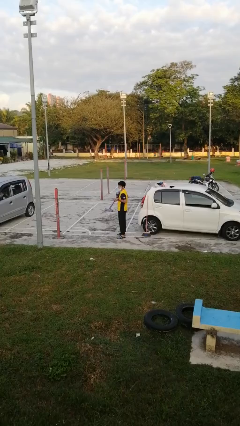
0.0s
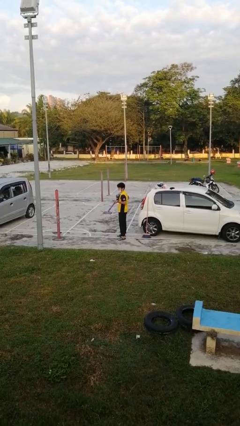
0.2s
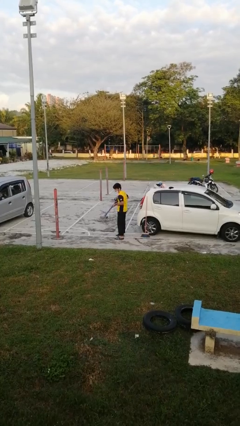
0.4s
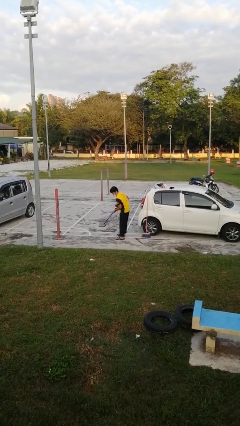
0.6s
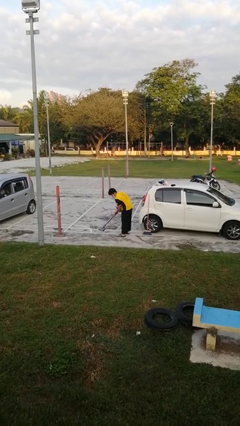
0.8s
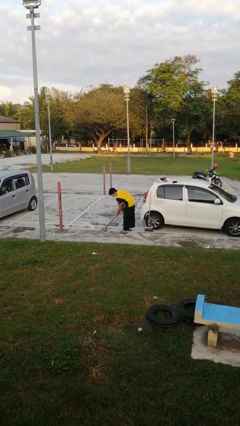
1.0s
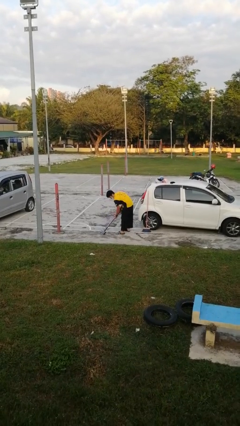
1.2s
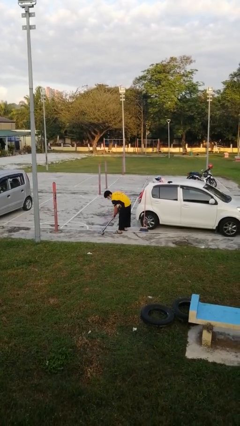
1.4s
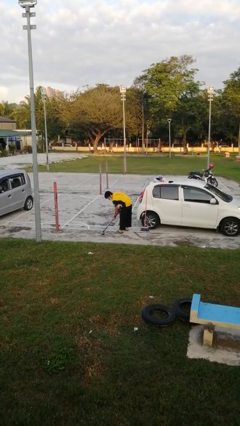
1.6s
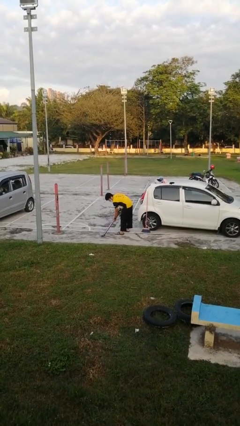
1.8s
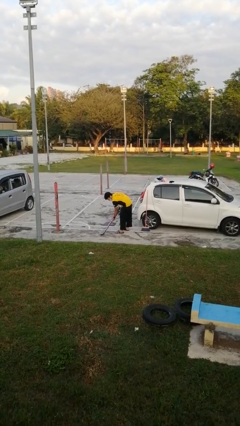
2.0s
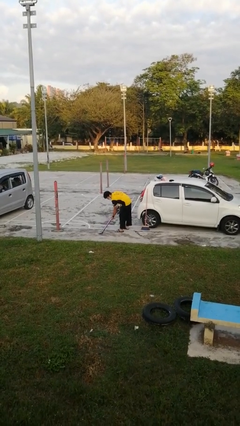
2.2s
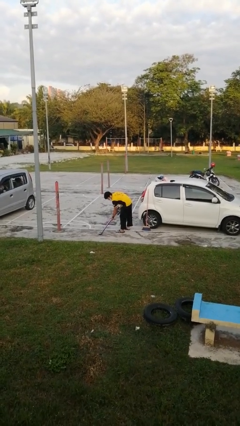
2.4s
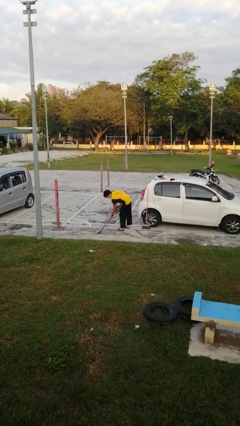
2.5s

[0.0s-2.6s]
person vacuums carpet

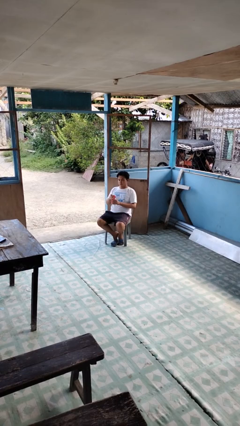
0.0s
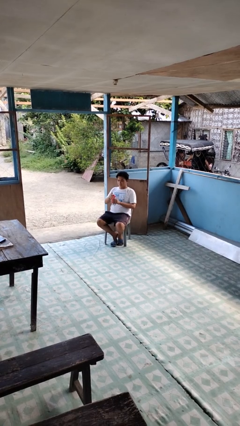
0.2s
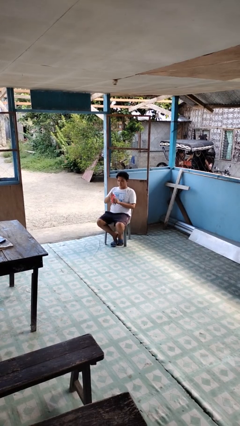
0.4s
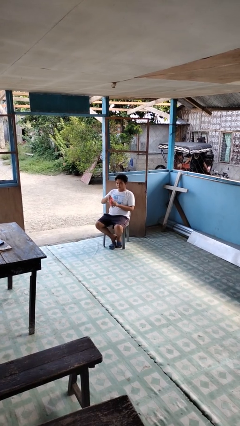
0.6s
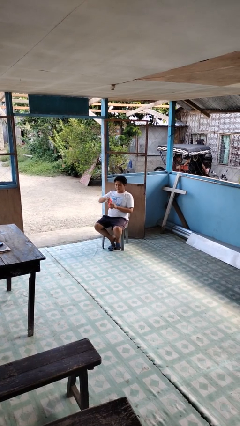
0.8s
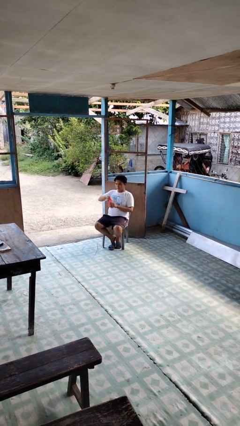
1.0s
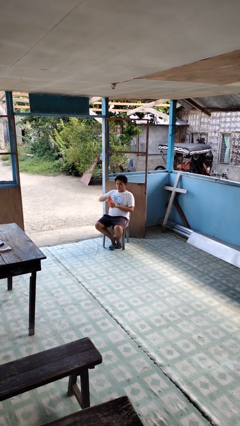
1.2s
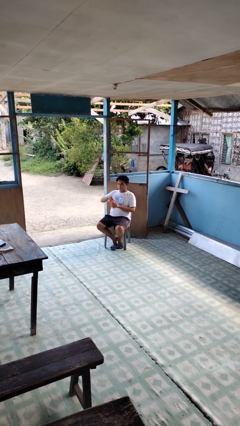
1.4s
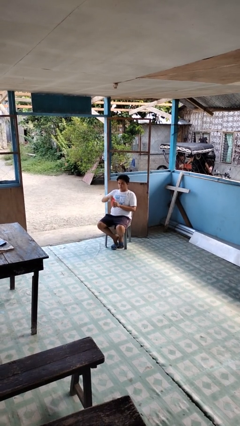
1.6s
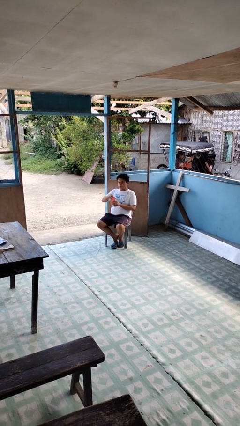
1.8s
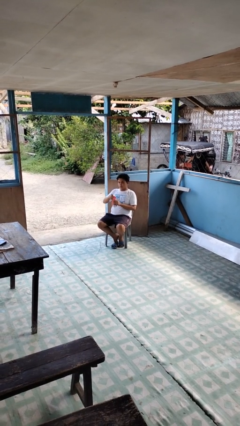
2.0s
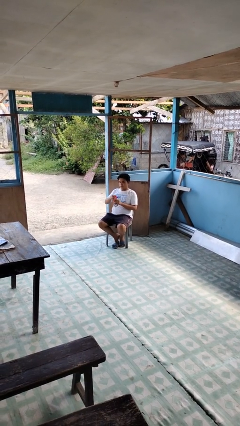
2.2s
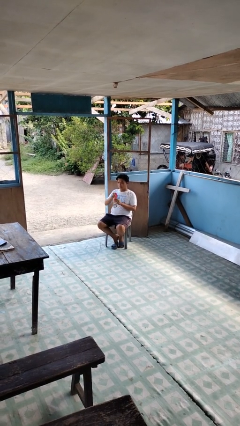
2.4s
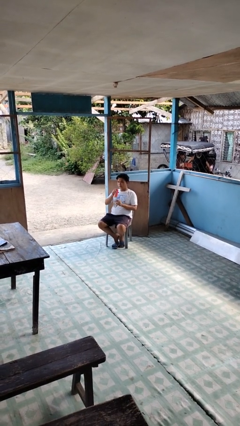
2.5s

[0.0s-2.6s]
person opens beverage can

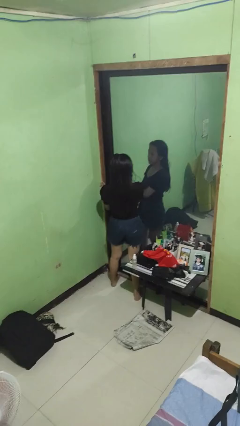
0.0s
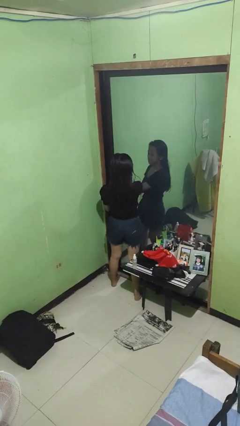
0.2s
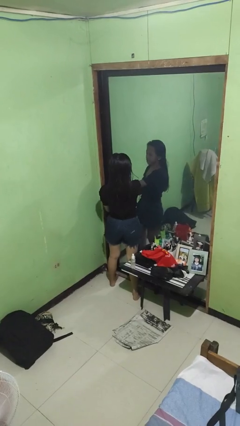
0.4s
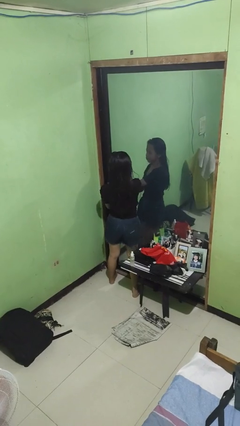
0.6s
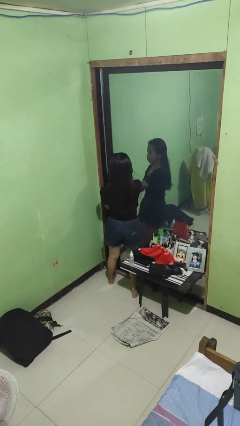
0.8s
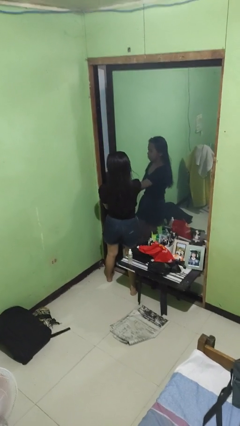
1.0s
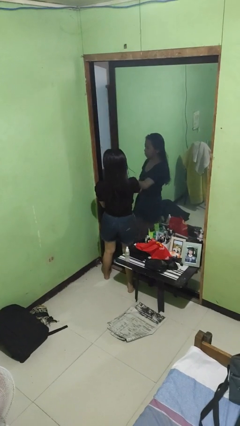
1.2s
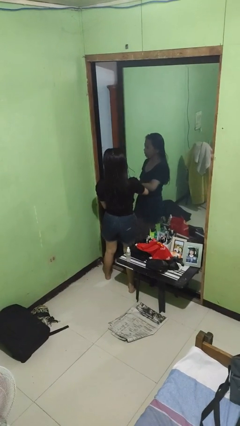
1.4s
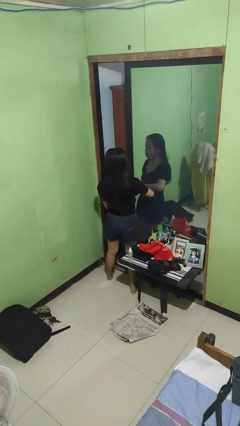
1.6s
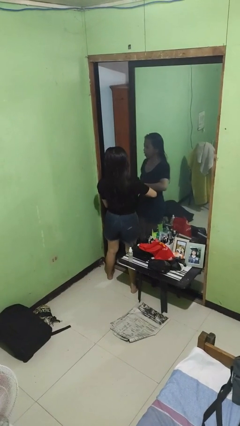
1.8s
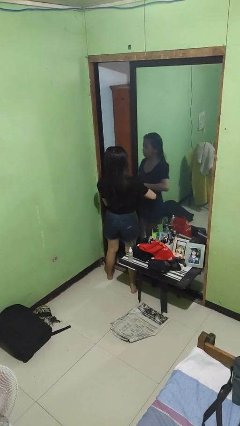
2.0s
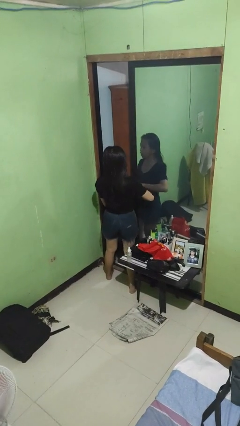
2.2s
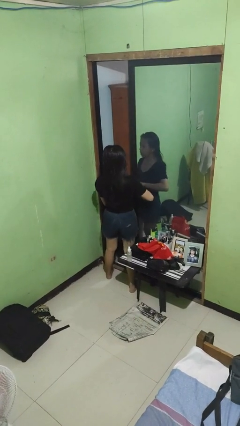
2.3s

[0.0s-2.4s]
person opens sliding door

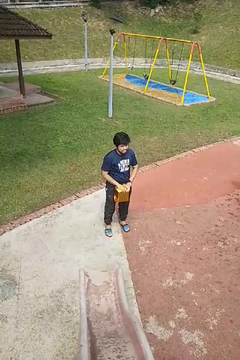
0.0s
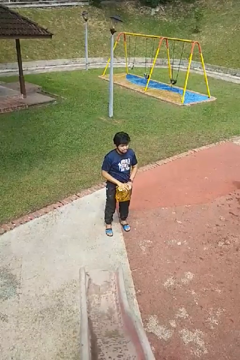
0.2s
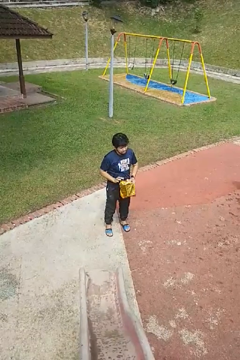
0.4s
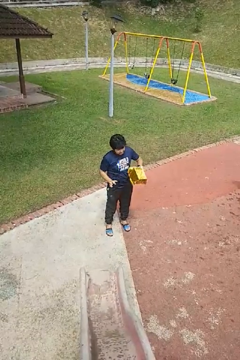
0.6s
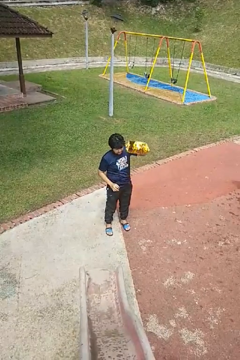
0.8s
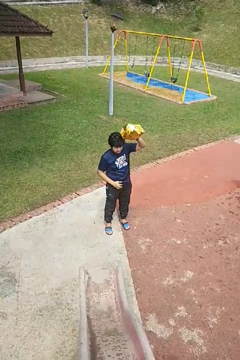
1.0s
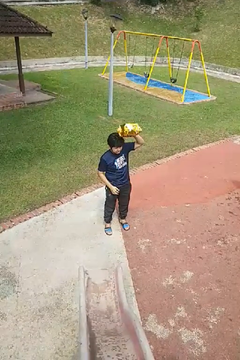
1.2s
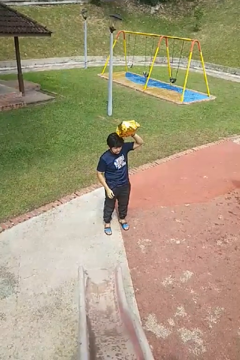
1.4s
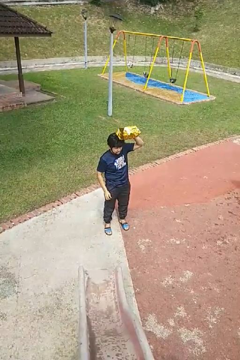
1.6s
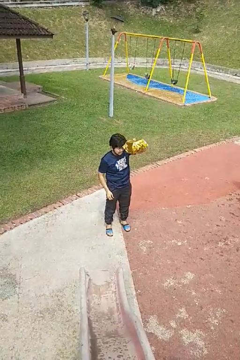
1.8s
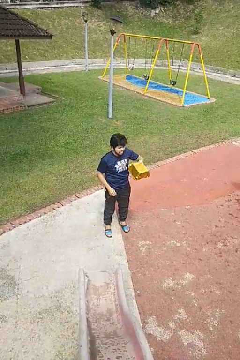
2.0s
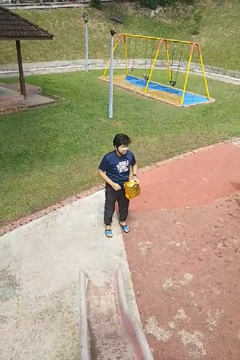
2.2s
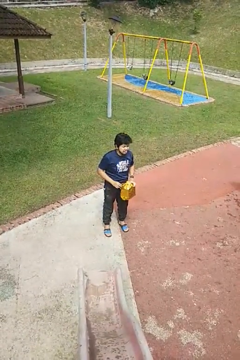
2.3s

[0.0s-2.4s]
person holds object above head

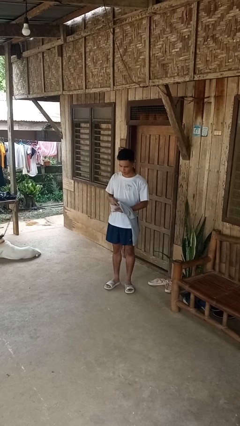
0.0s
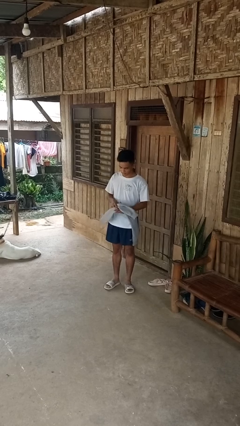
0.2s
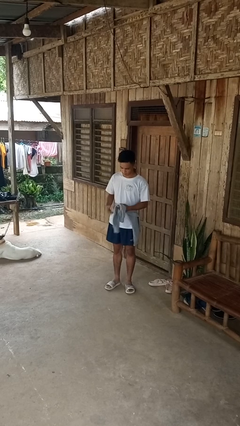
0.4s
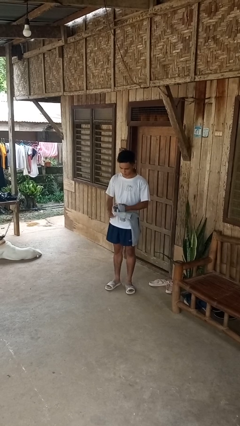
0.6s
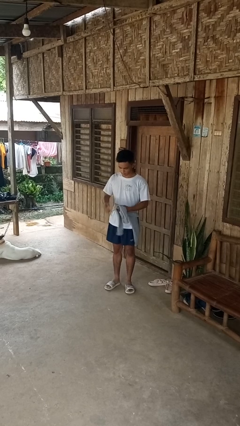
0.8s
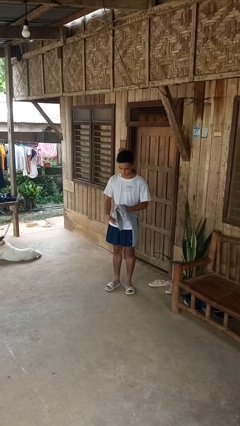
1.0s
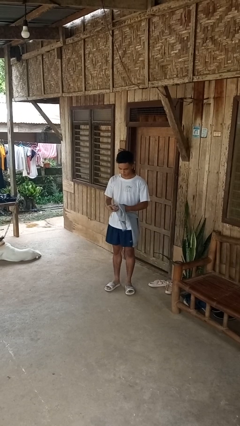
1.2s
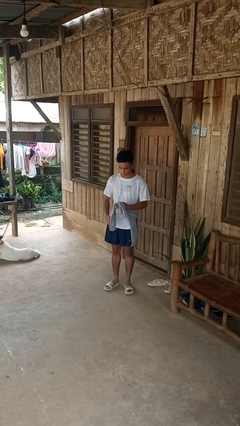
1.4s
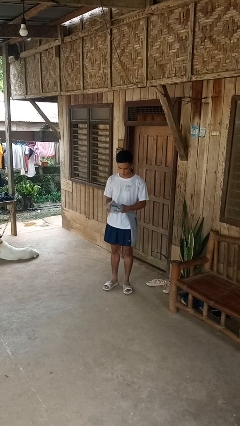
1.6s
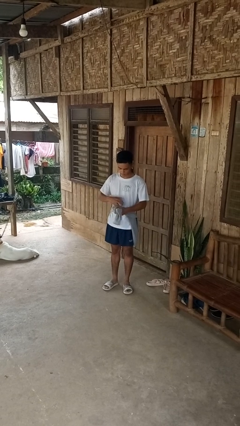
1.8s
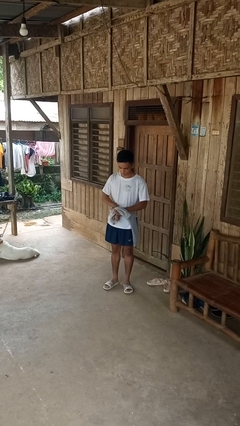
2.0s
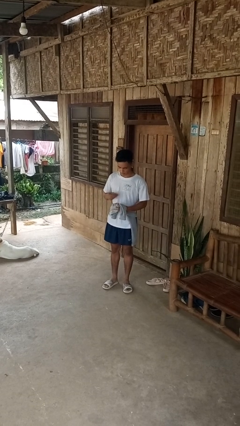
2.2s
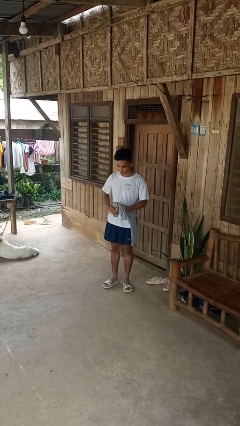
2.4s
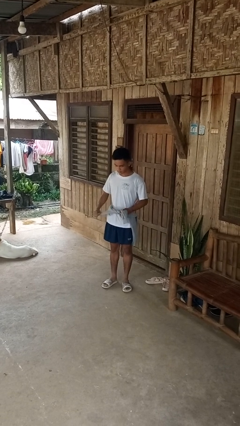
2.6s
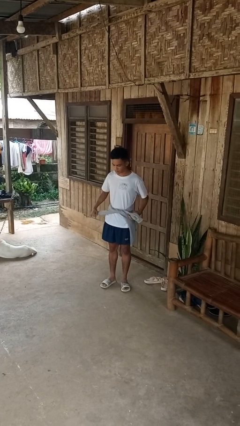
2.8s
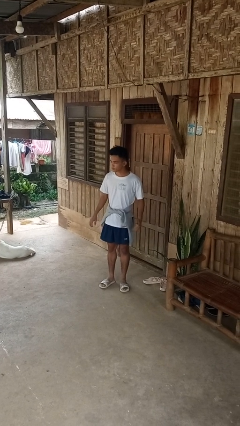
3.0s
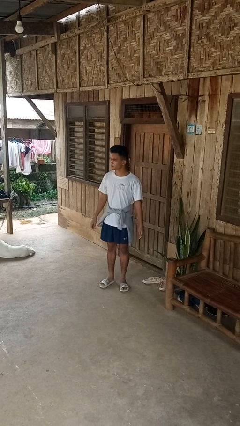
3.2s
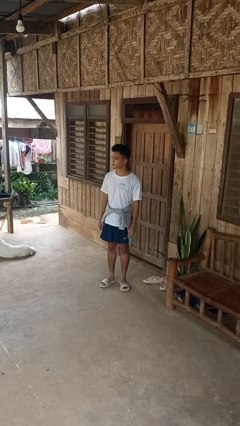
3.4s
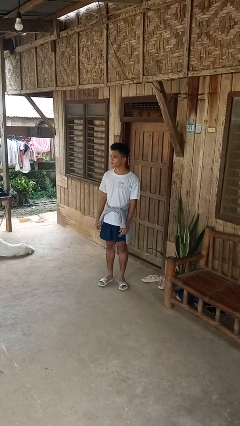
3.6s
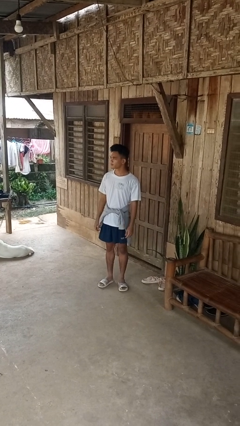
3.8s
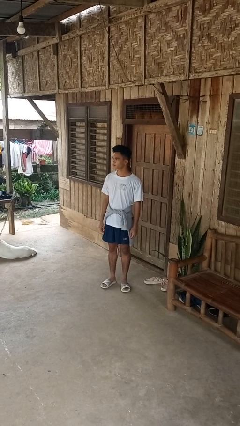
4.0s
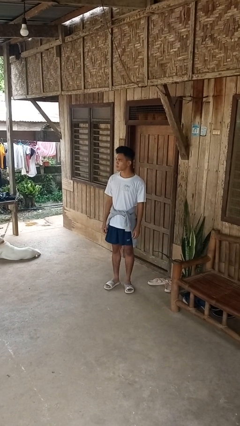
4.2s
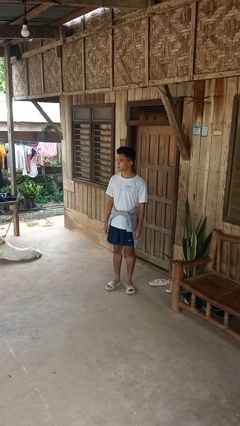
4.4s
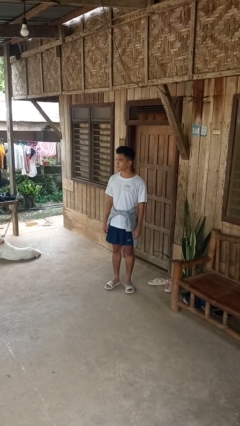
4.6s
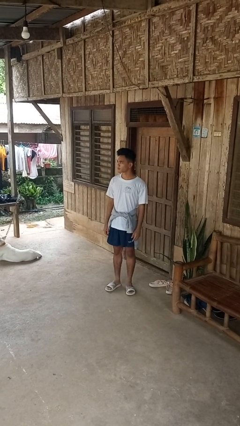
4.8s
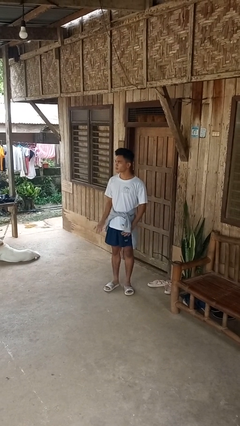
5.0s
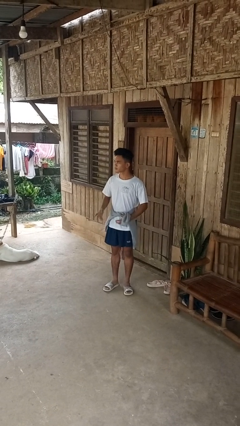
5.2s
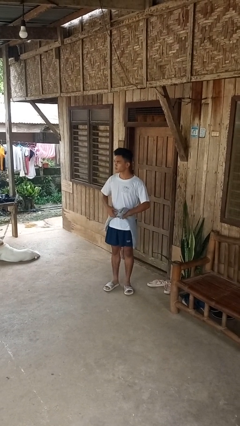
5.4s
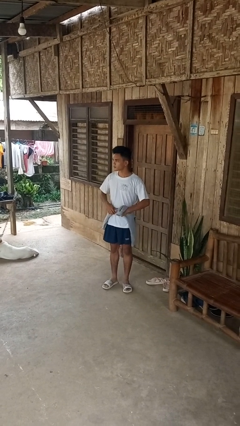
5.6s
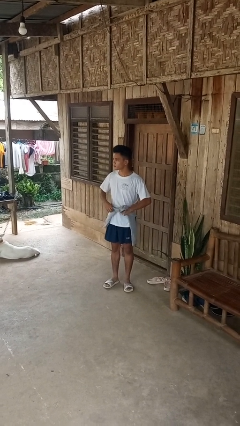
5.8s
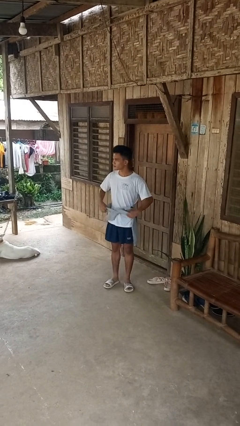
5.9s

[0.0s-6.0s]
person ties jacket around waist

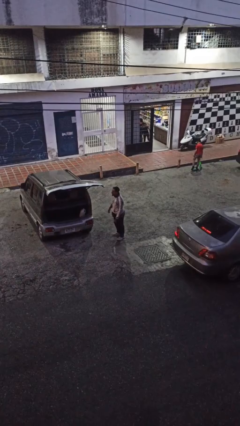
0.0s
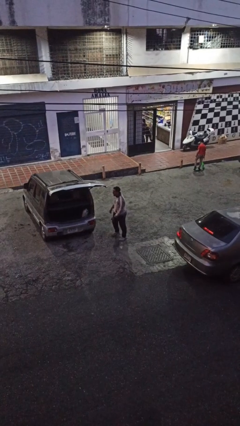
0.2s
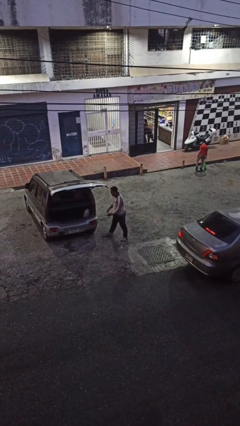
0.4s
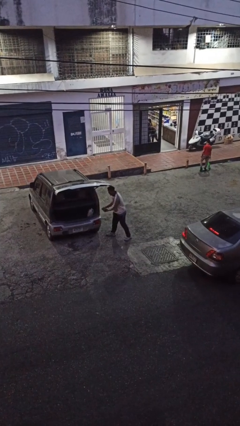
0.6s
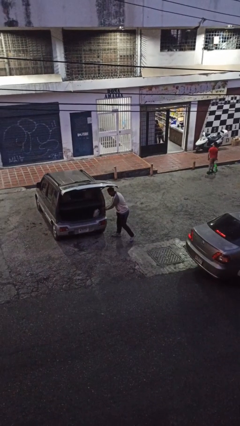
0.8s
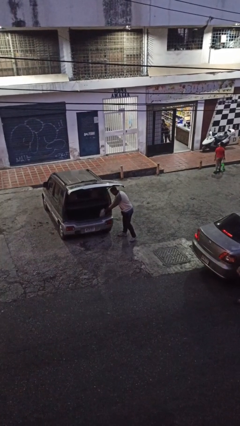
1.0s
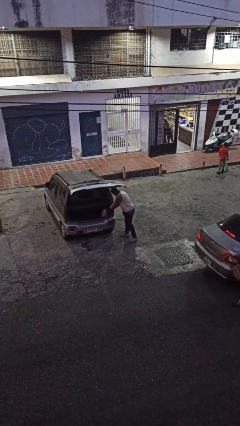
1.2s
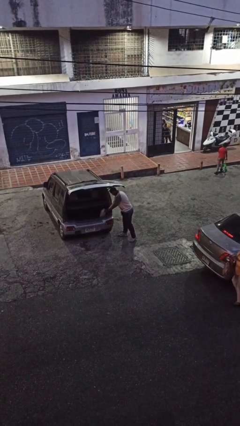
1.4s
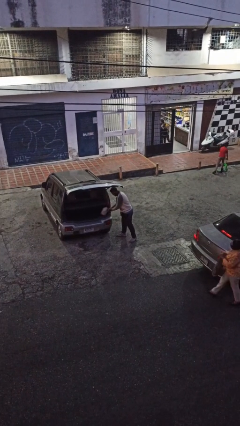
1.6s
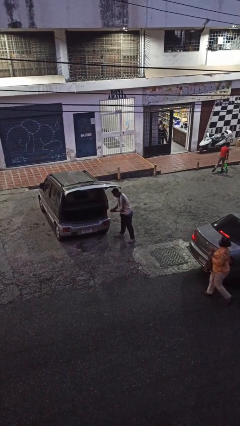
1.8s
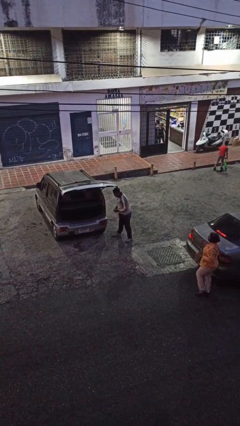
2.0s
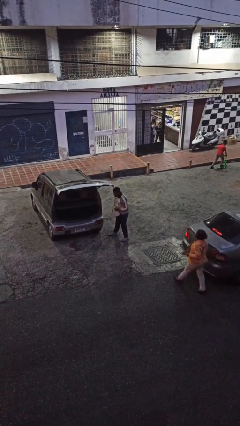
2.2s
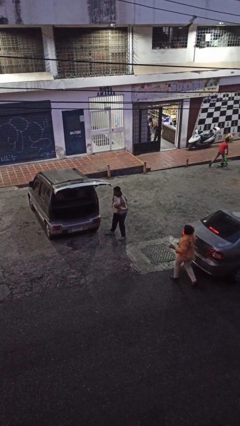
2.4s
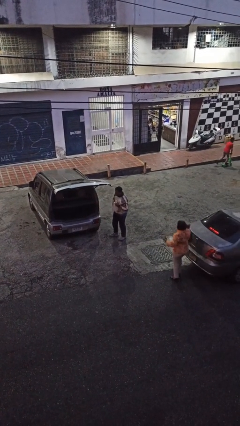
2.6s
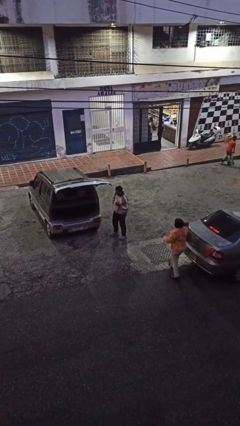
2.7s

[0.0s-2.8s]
person unloads car
